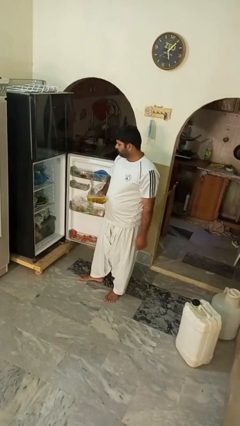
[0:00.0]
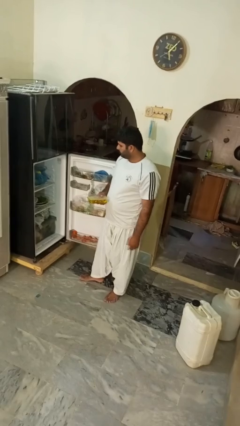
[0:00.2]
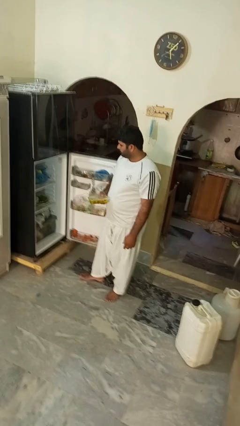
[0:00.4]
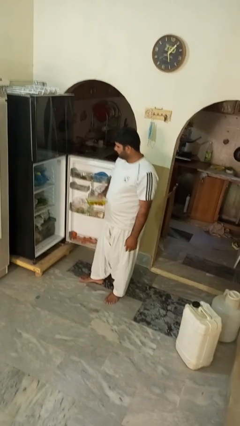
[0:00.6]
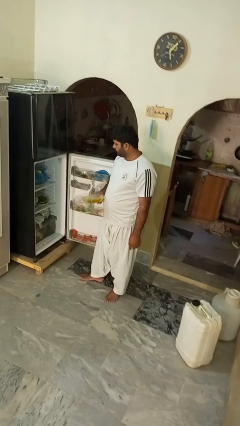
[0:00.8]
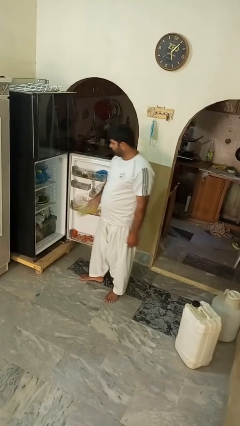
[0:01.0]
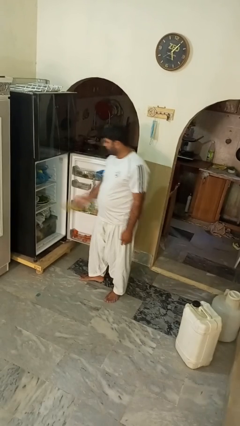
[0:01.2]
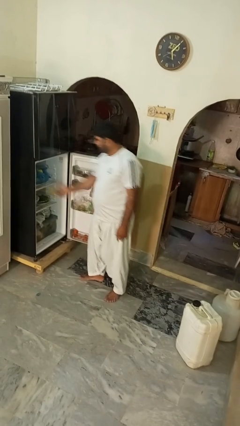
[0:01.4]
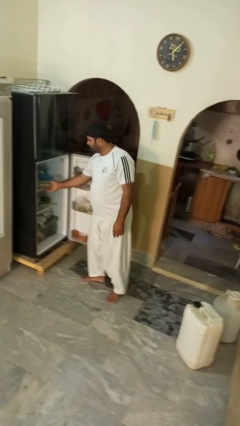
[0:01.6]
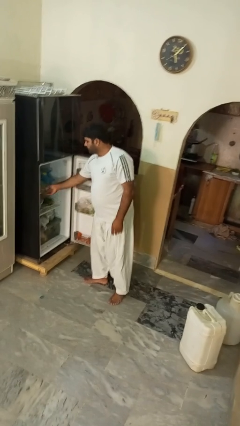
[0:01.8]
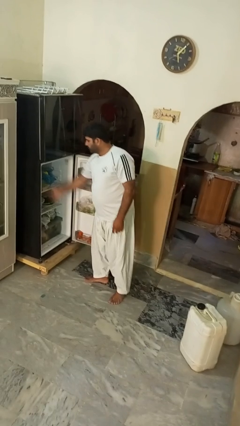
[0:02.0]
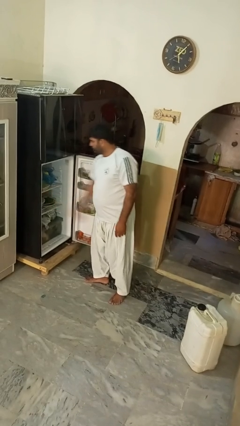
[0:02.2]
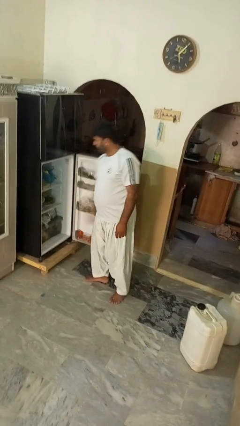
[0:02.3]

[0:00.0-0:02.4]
person puts object into refrigerator

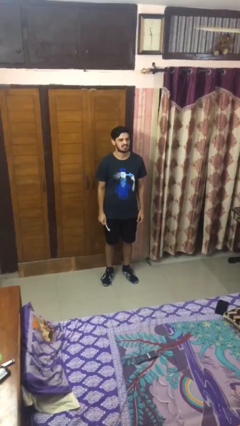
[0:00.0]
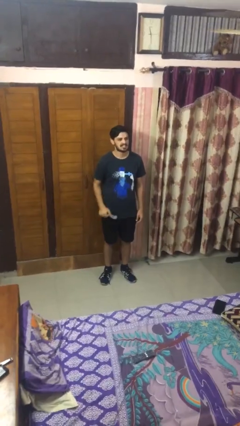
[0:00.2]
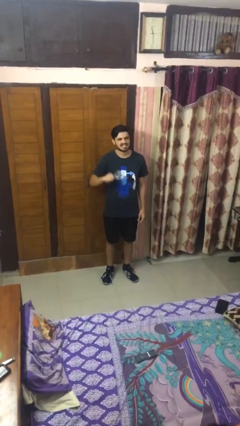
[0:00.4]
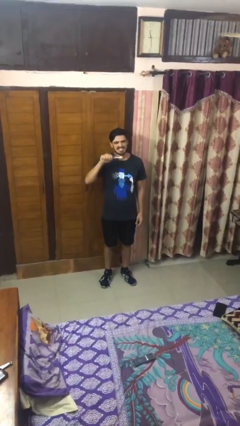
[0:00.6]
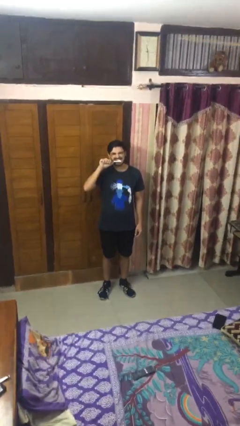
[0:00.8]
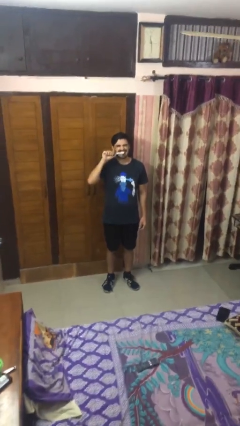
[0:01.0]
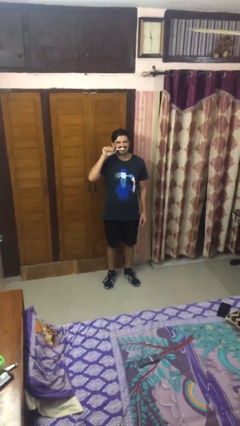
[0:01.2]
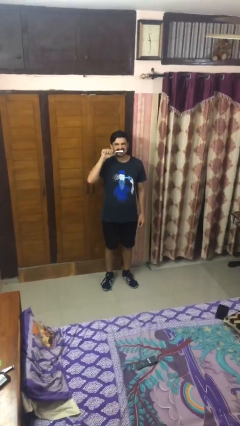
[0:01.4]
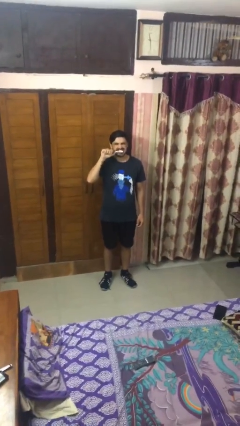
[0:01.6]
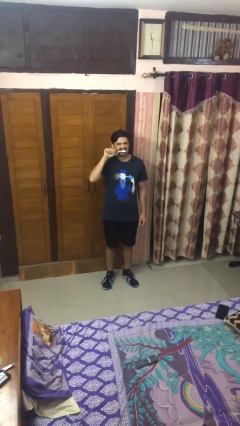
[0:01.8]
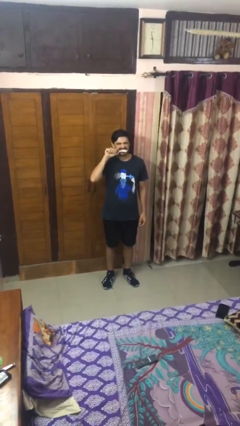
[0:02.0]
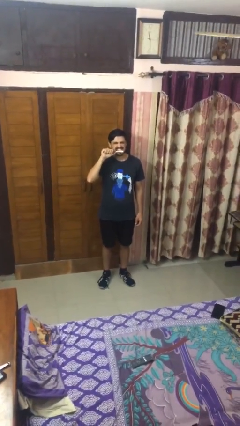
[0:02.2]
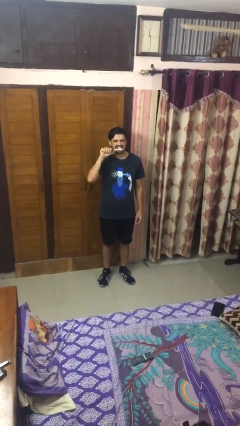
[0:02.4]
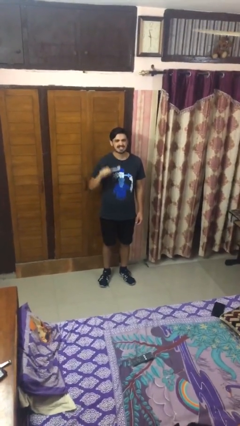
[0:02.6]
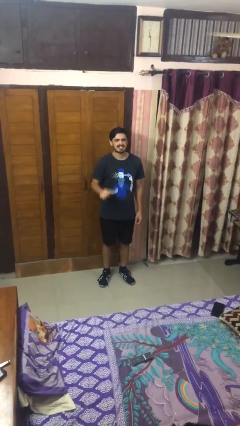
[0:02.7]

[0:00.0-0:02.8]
person brushes teeth

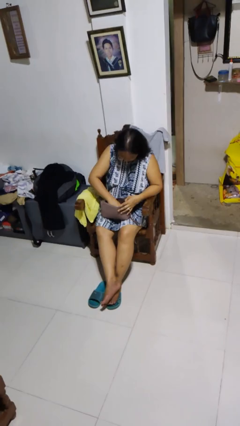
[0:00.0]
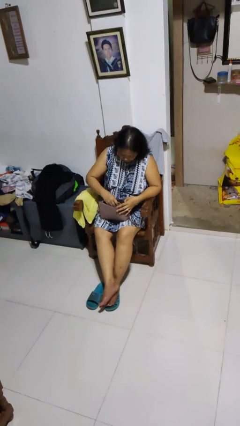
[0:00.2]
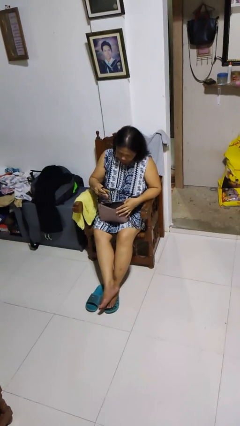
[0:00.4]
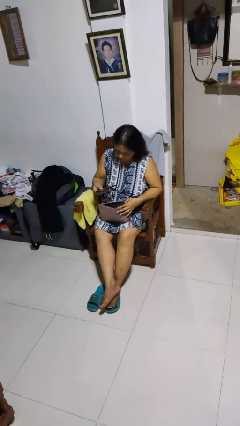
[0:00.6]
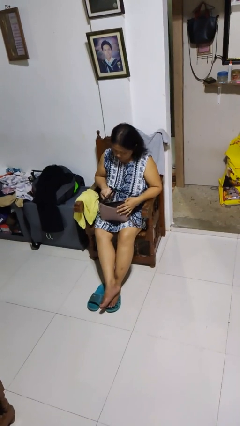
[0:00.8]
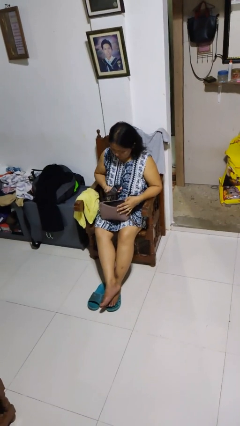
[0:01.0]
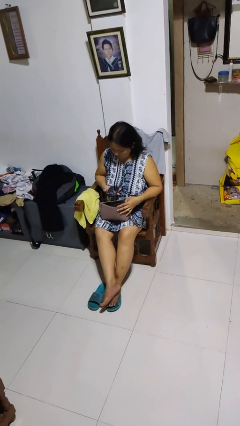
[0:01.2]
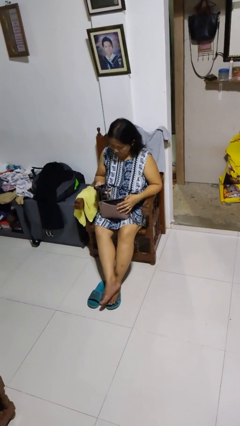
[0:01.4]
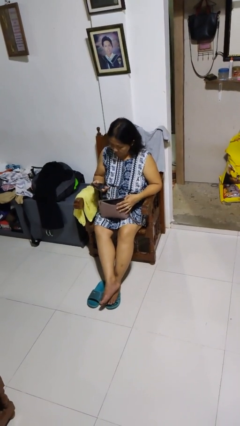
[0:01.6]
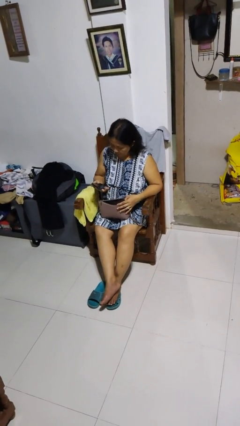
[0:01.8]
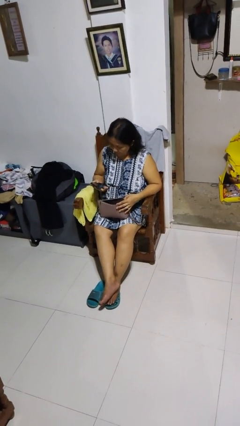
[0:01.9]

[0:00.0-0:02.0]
person takes object from purse

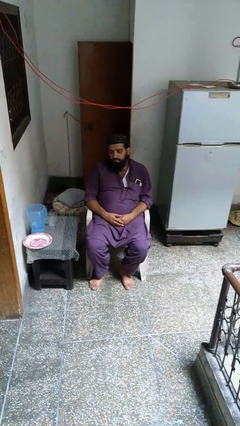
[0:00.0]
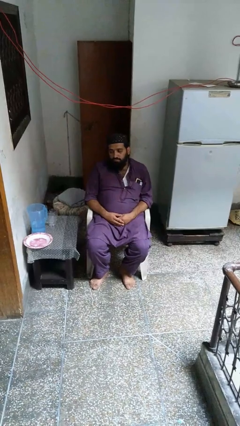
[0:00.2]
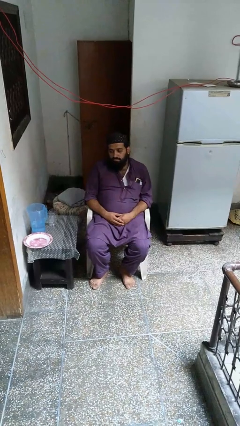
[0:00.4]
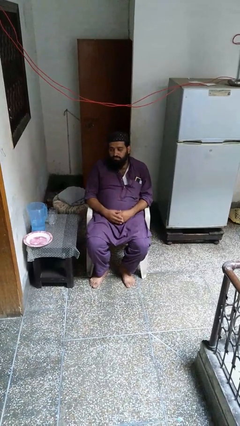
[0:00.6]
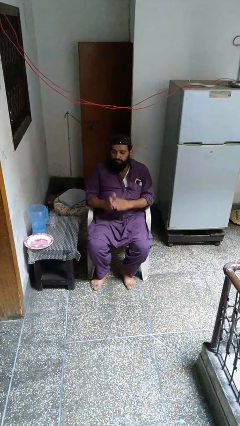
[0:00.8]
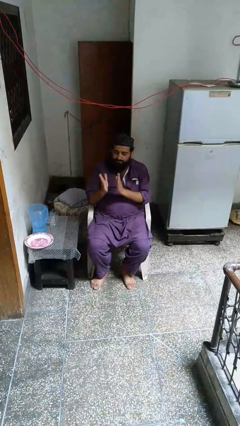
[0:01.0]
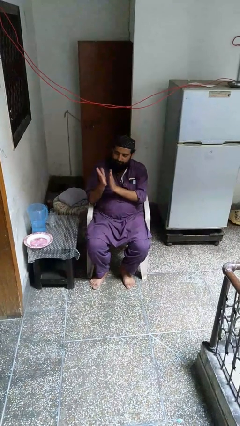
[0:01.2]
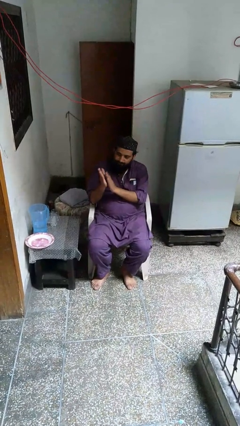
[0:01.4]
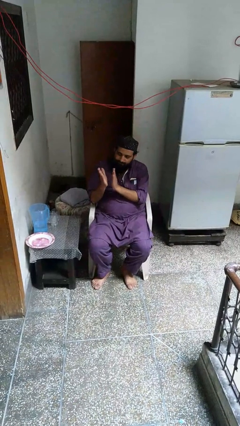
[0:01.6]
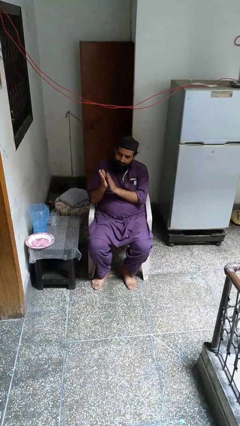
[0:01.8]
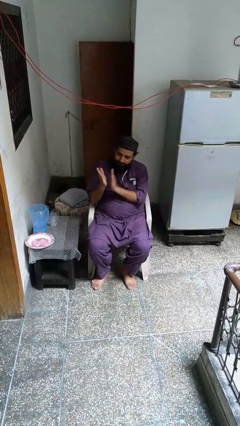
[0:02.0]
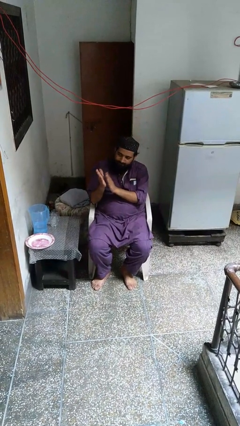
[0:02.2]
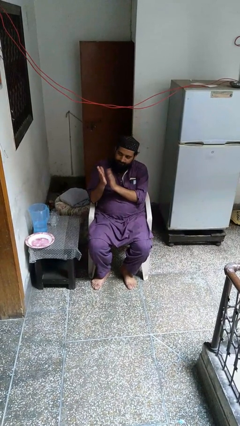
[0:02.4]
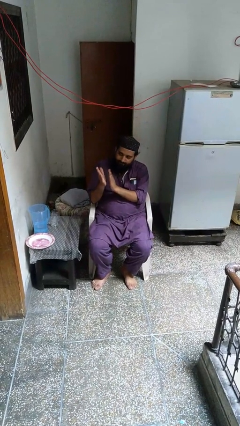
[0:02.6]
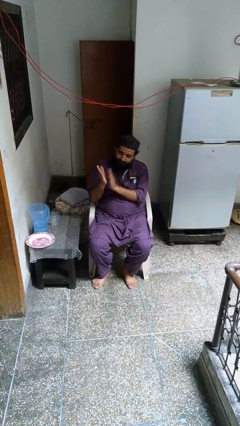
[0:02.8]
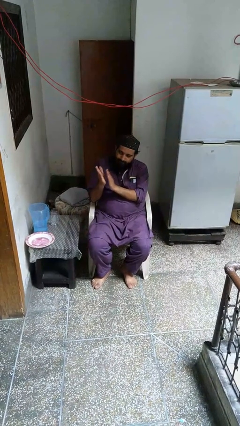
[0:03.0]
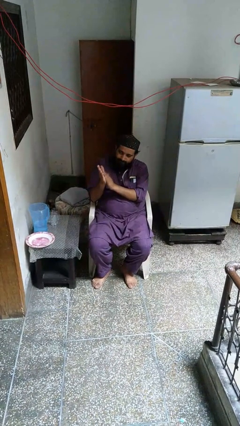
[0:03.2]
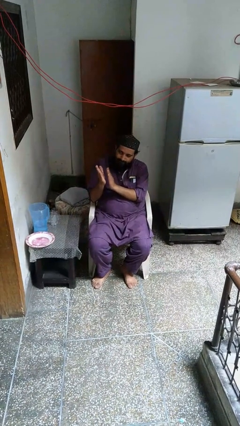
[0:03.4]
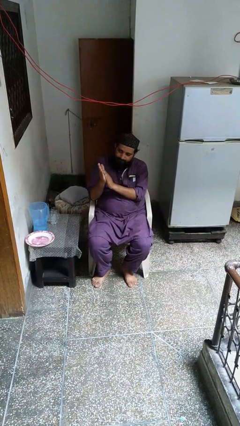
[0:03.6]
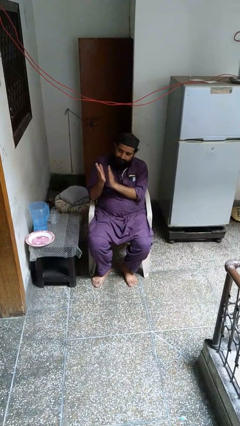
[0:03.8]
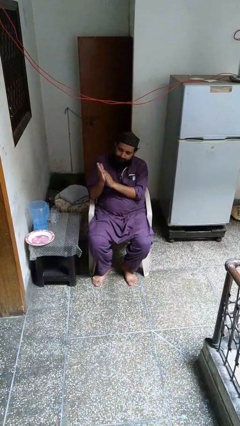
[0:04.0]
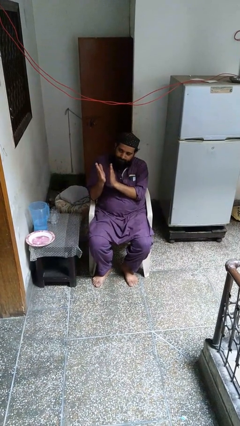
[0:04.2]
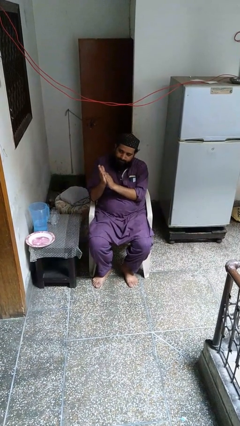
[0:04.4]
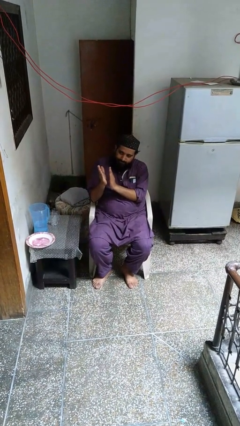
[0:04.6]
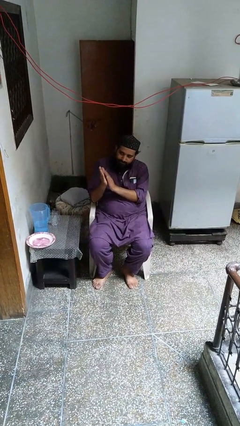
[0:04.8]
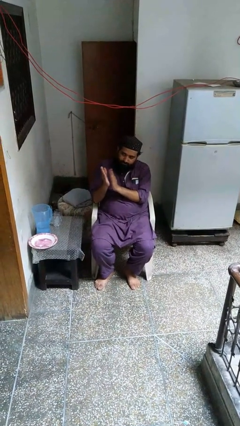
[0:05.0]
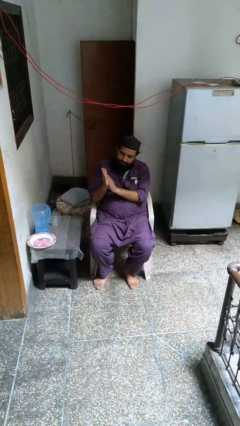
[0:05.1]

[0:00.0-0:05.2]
person claps hands

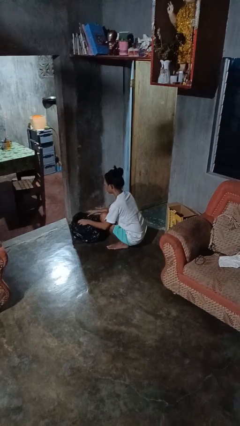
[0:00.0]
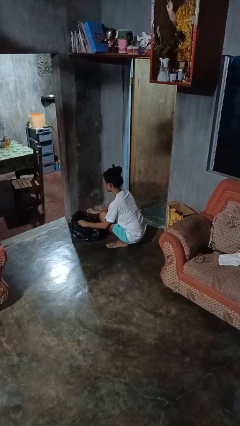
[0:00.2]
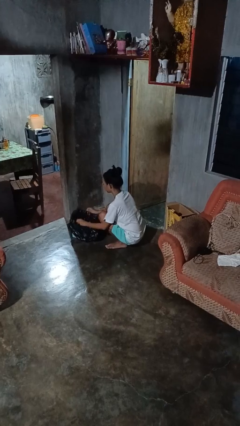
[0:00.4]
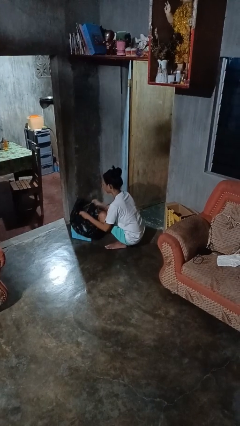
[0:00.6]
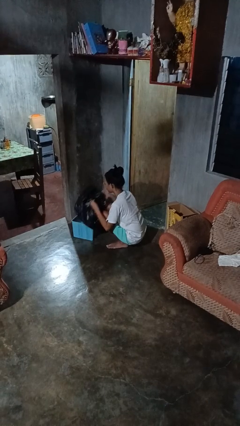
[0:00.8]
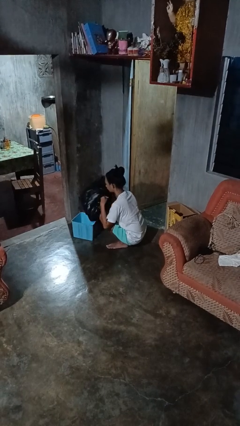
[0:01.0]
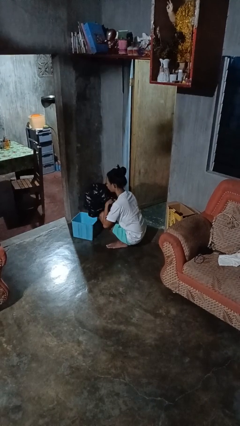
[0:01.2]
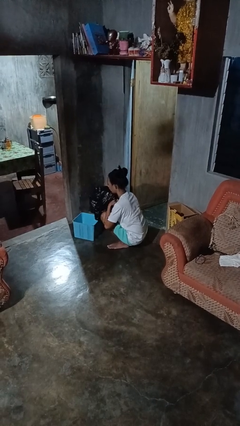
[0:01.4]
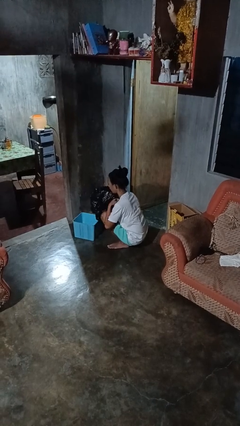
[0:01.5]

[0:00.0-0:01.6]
person removes trashbag from trashcan

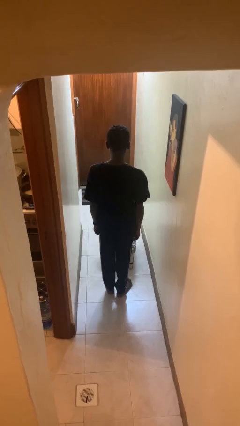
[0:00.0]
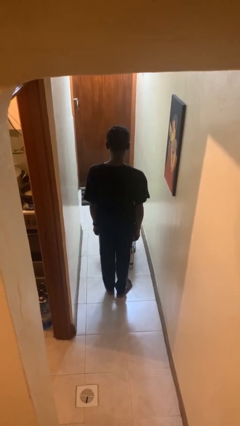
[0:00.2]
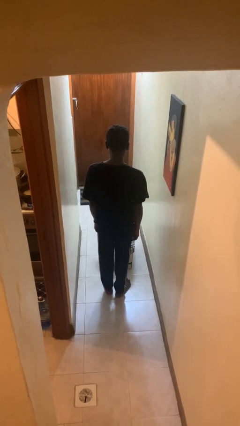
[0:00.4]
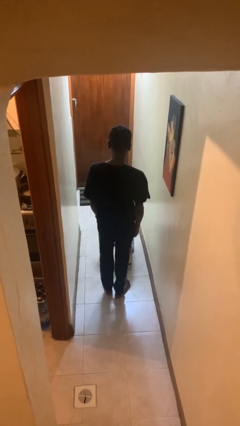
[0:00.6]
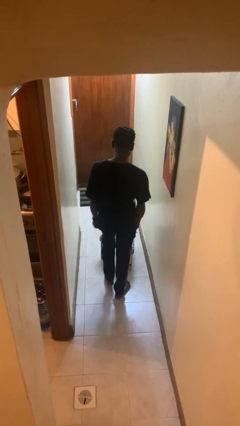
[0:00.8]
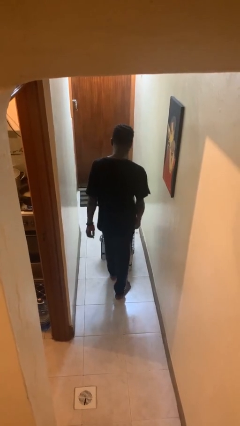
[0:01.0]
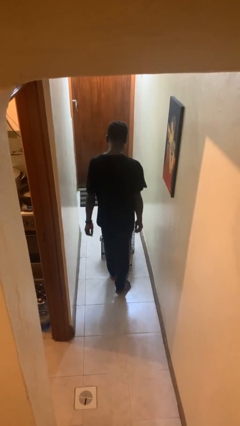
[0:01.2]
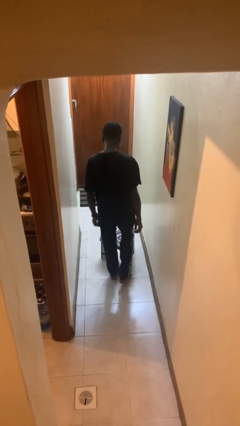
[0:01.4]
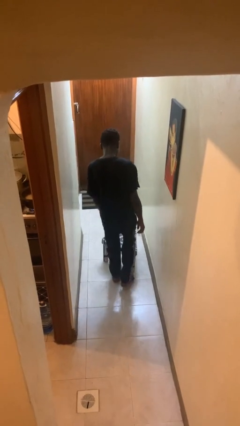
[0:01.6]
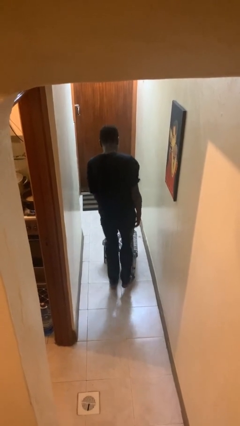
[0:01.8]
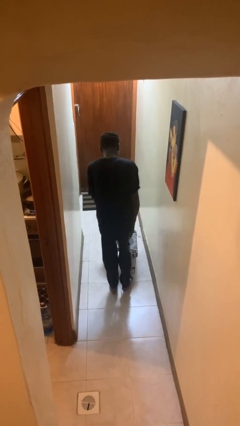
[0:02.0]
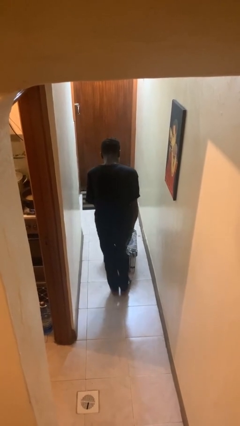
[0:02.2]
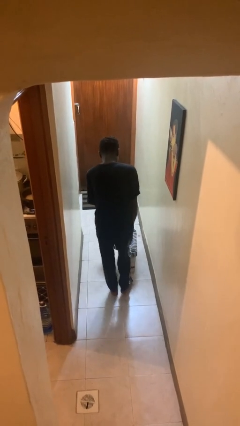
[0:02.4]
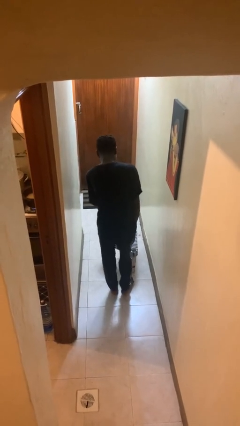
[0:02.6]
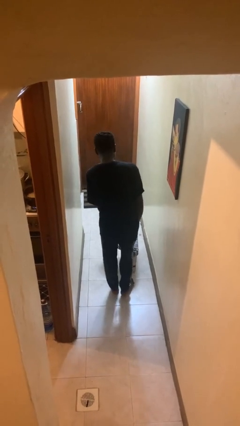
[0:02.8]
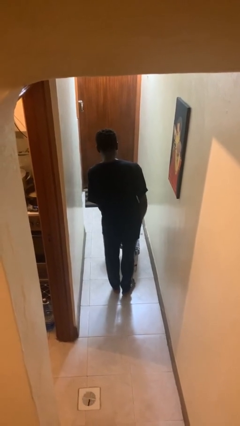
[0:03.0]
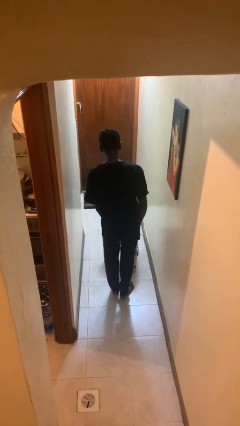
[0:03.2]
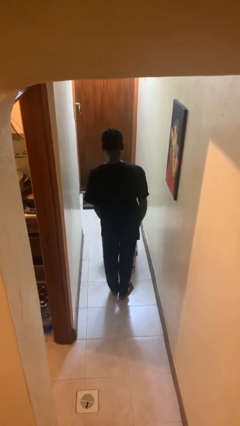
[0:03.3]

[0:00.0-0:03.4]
person stubs toe
